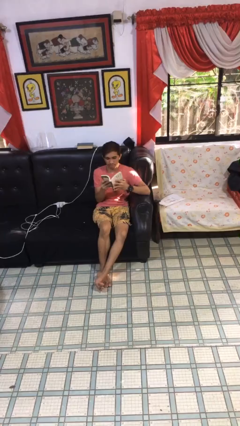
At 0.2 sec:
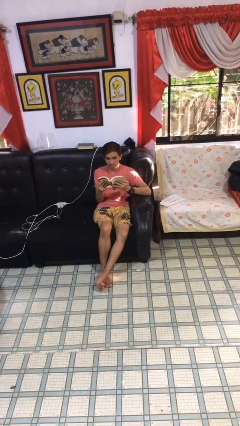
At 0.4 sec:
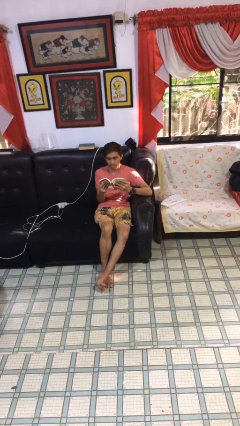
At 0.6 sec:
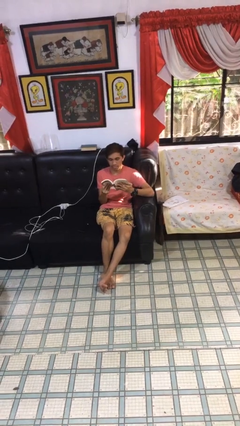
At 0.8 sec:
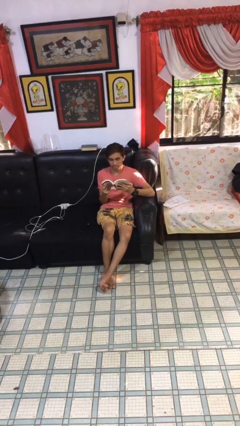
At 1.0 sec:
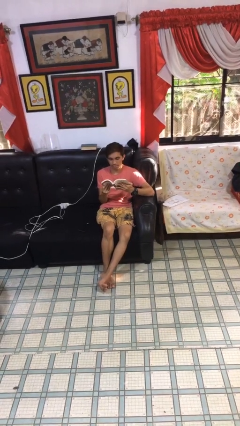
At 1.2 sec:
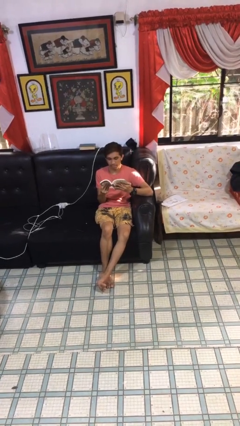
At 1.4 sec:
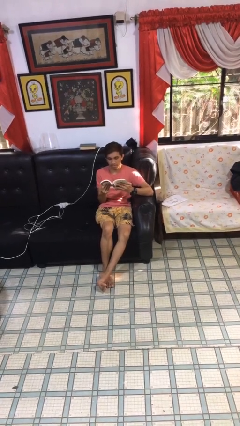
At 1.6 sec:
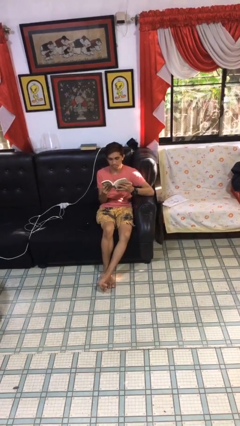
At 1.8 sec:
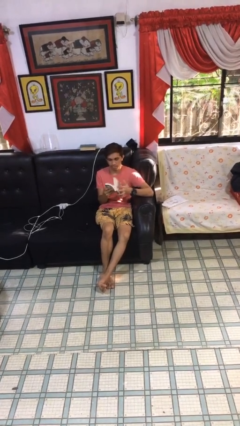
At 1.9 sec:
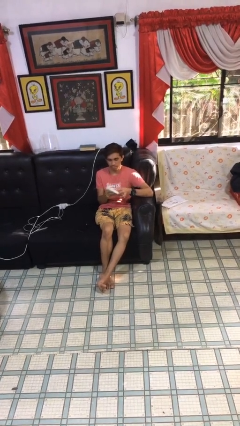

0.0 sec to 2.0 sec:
person reads document

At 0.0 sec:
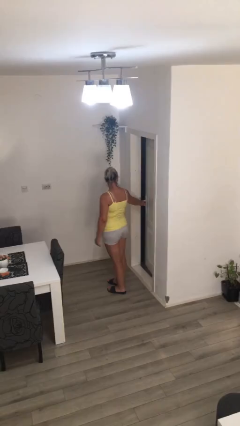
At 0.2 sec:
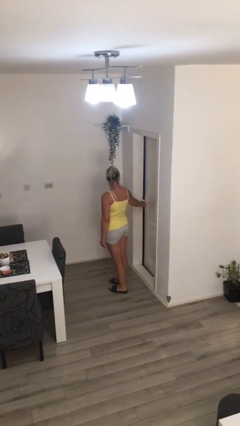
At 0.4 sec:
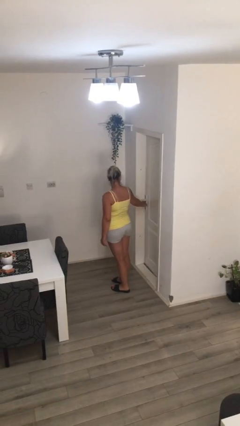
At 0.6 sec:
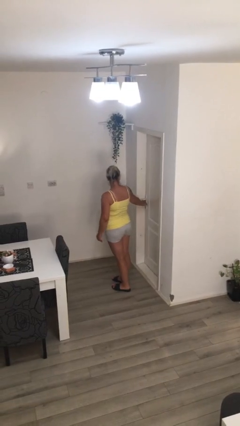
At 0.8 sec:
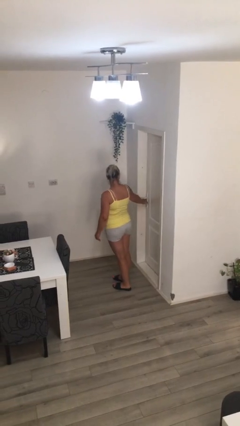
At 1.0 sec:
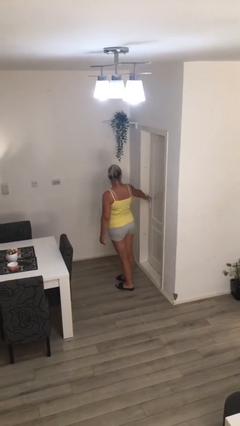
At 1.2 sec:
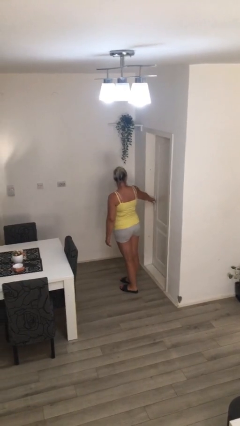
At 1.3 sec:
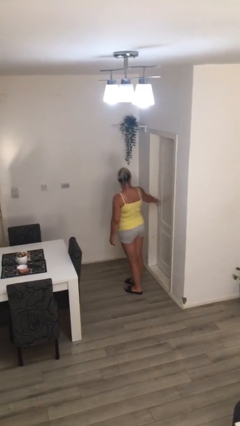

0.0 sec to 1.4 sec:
person closes facility door

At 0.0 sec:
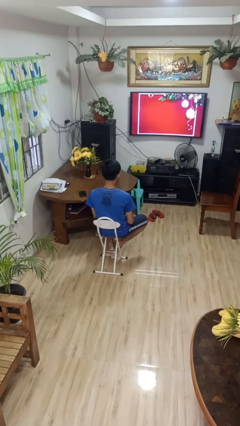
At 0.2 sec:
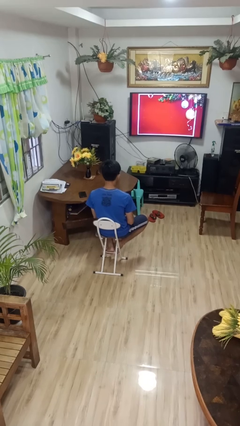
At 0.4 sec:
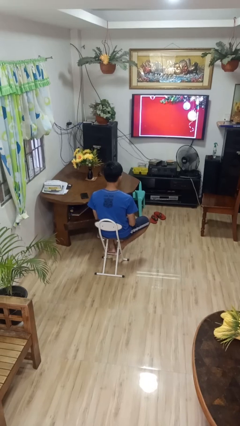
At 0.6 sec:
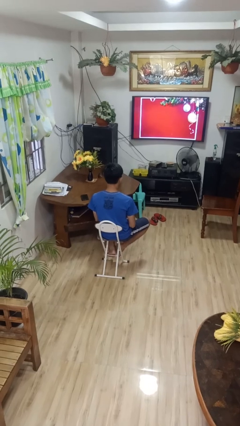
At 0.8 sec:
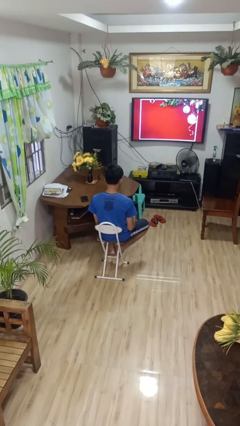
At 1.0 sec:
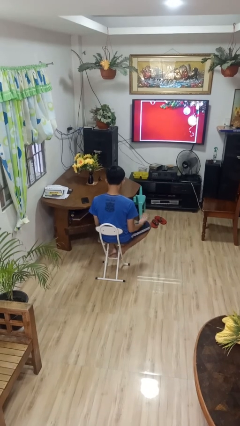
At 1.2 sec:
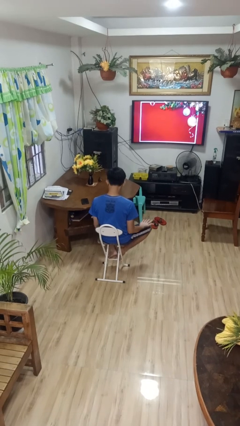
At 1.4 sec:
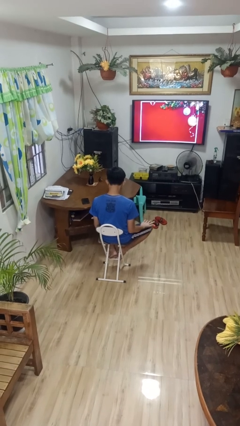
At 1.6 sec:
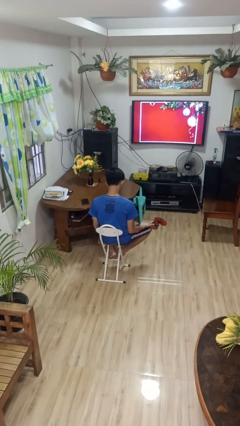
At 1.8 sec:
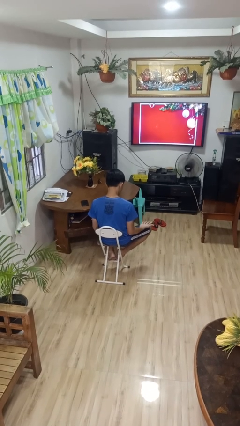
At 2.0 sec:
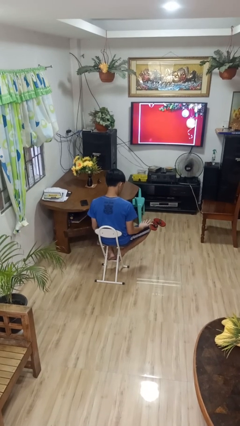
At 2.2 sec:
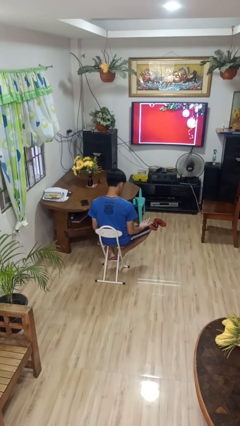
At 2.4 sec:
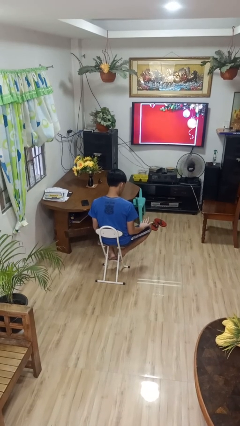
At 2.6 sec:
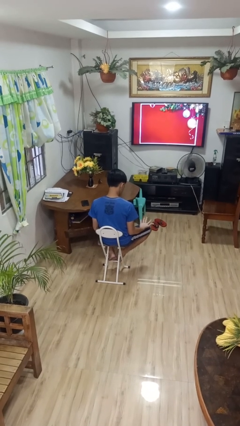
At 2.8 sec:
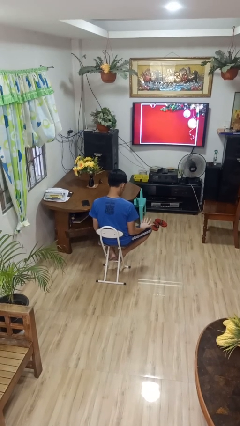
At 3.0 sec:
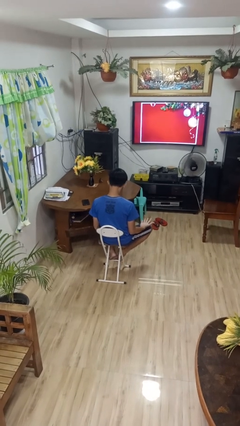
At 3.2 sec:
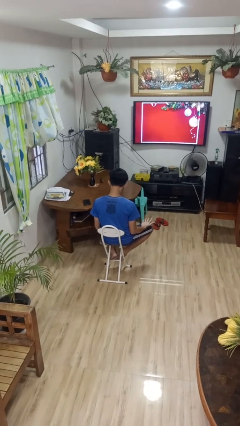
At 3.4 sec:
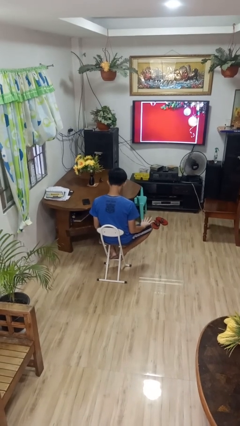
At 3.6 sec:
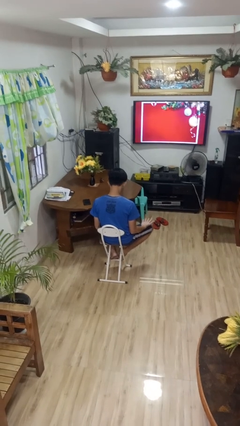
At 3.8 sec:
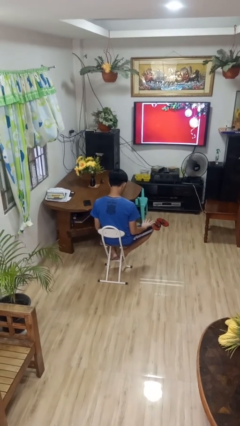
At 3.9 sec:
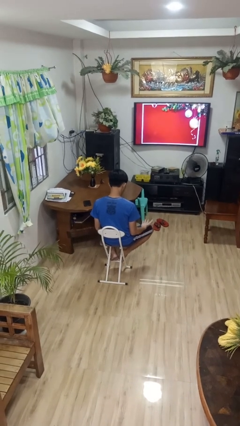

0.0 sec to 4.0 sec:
person looks at hands in lap

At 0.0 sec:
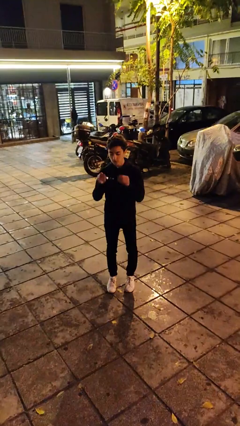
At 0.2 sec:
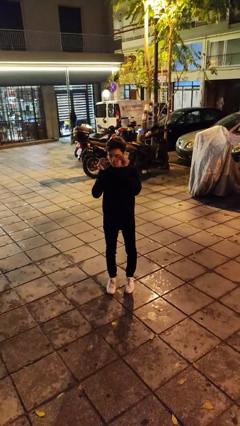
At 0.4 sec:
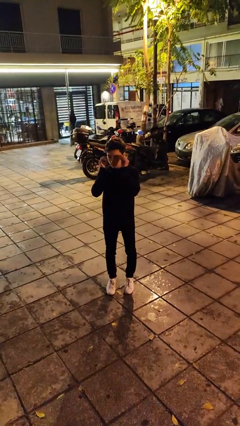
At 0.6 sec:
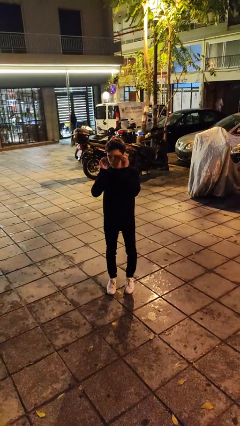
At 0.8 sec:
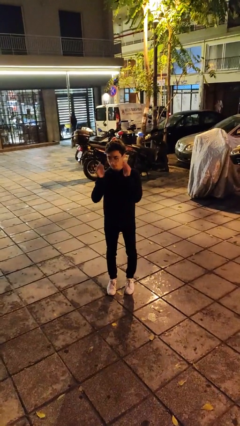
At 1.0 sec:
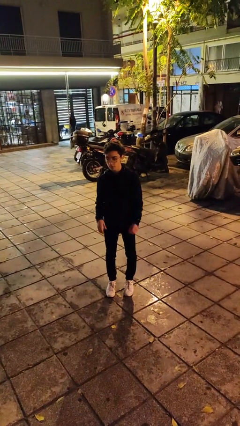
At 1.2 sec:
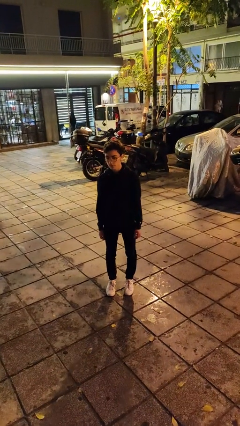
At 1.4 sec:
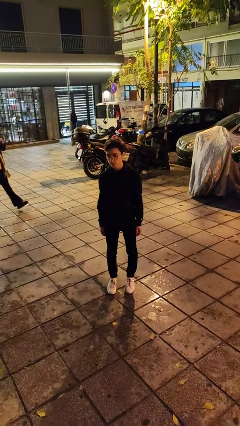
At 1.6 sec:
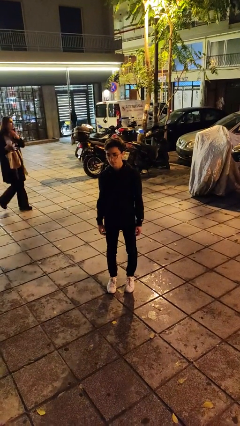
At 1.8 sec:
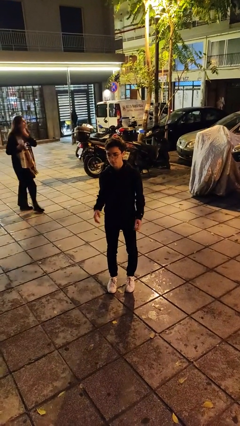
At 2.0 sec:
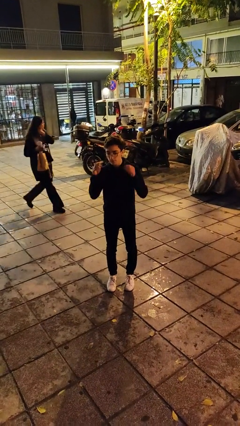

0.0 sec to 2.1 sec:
person puts on glasses

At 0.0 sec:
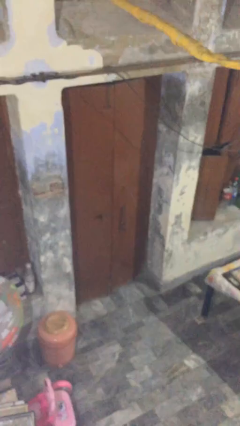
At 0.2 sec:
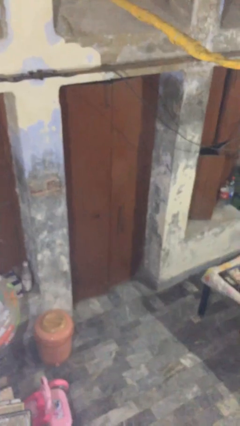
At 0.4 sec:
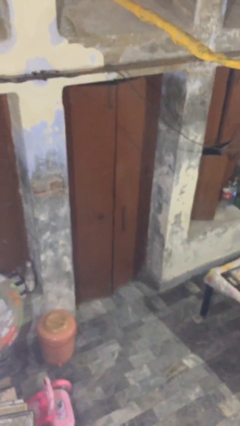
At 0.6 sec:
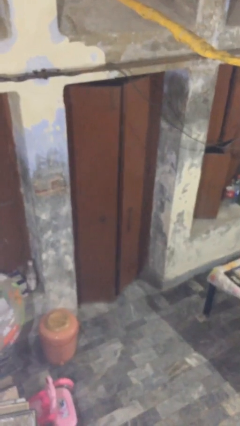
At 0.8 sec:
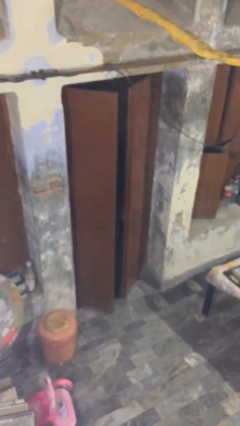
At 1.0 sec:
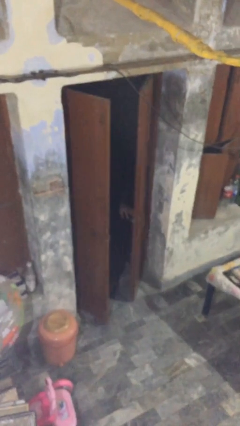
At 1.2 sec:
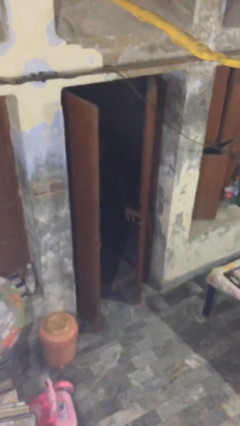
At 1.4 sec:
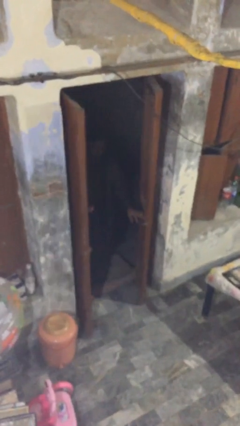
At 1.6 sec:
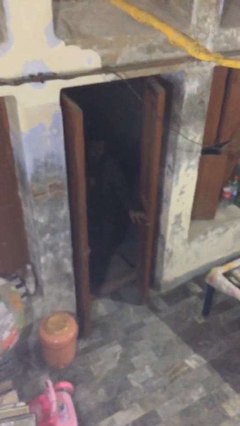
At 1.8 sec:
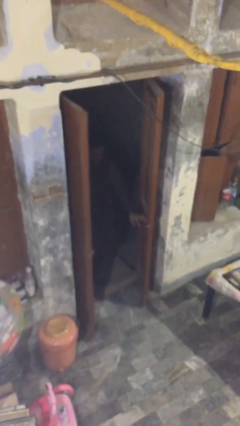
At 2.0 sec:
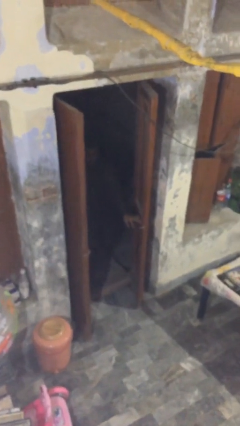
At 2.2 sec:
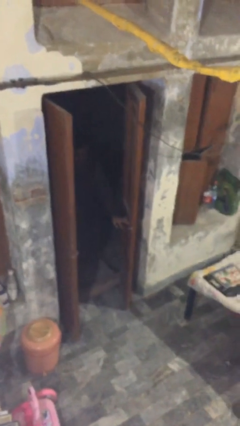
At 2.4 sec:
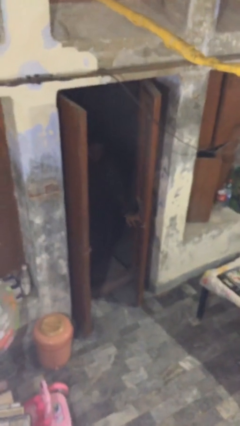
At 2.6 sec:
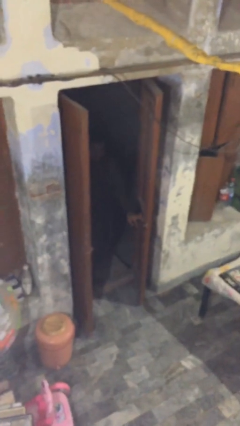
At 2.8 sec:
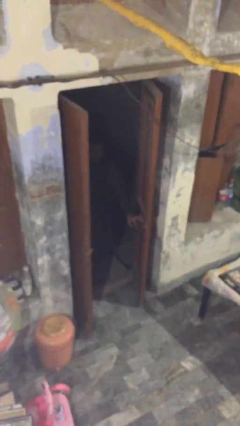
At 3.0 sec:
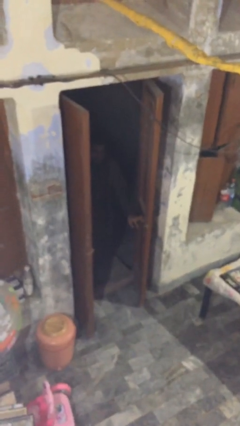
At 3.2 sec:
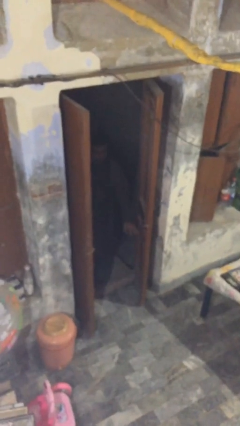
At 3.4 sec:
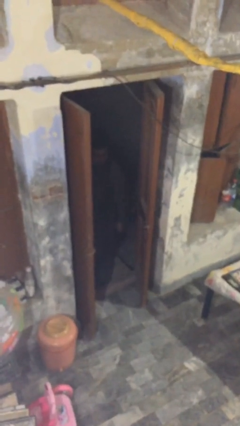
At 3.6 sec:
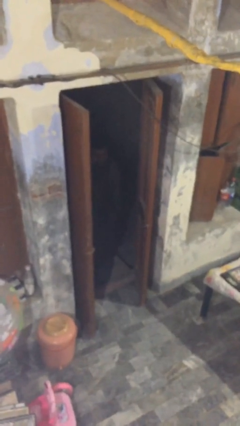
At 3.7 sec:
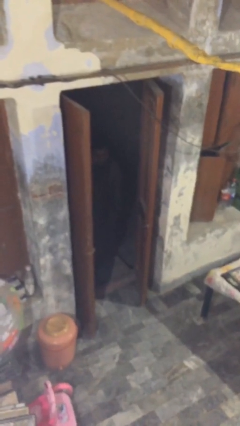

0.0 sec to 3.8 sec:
person opens facility door

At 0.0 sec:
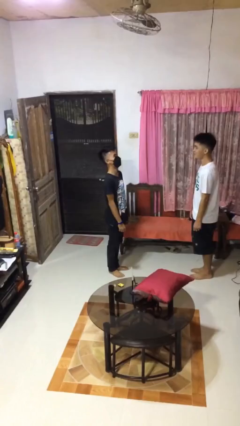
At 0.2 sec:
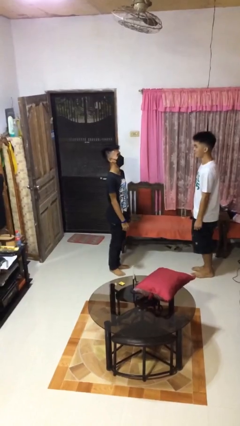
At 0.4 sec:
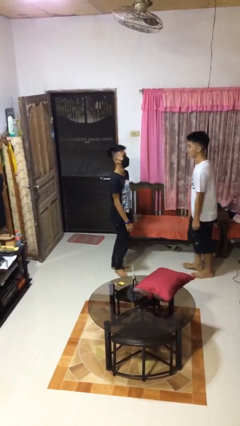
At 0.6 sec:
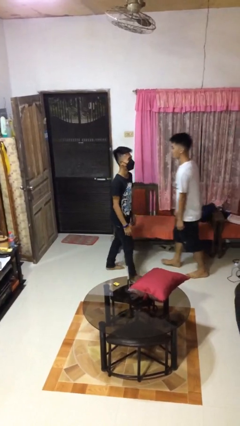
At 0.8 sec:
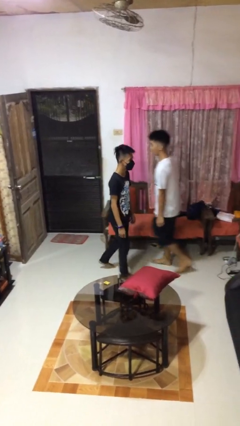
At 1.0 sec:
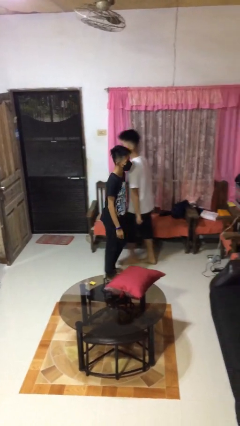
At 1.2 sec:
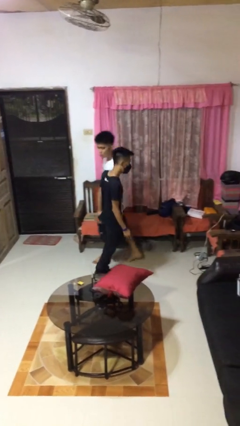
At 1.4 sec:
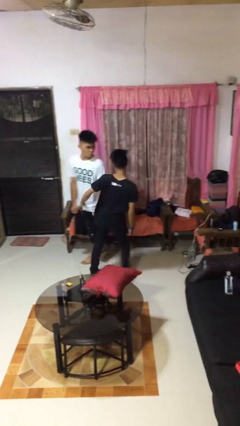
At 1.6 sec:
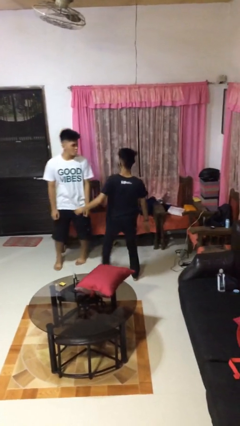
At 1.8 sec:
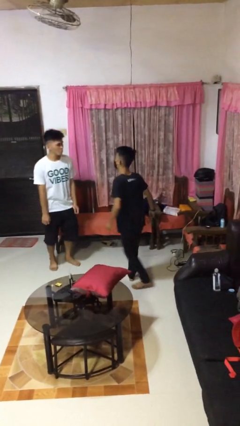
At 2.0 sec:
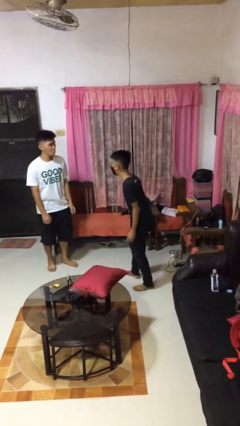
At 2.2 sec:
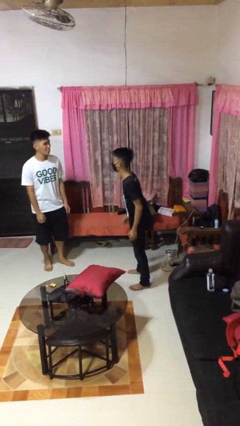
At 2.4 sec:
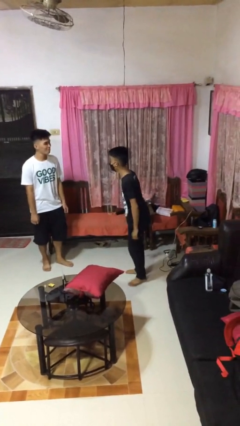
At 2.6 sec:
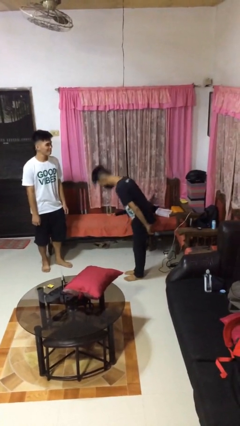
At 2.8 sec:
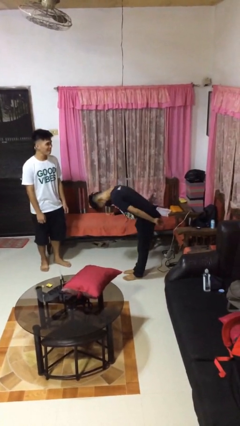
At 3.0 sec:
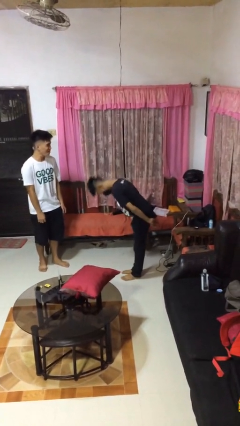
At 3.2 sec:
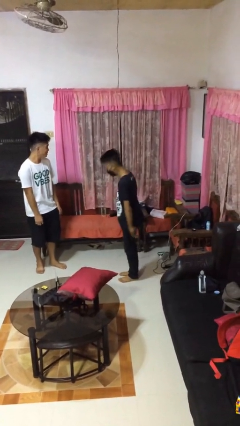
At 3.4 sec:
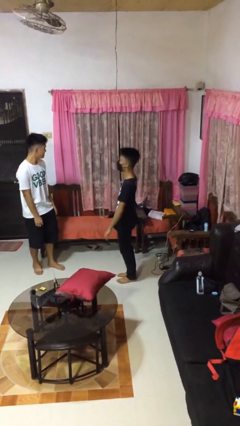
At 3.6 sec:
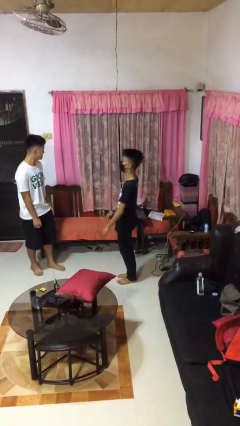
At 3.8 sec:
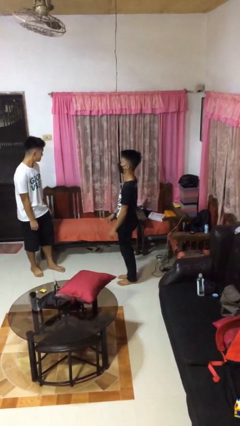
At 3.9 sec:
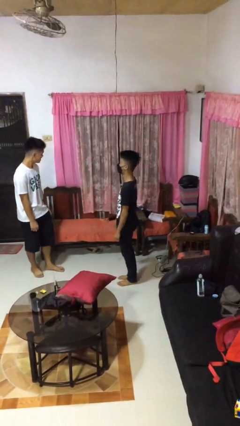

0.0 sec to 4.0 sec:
person bumps into person
